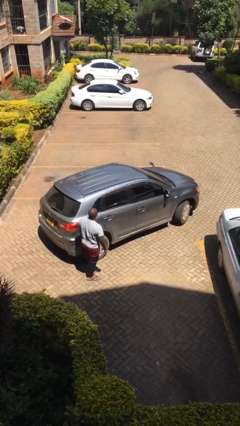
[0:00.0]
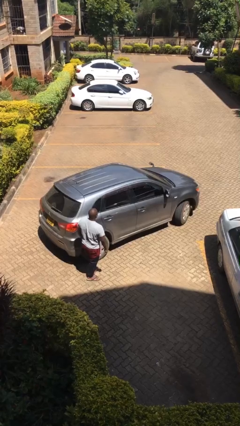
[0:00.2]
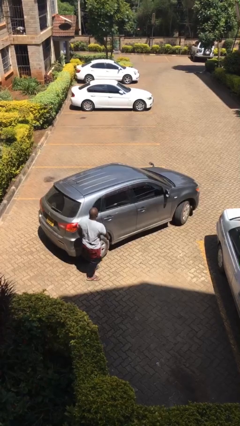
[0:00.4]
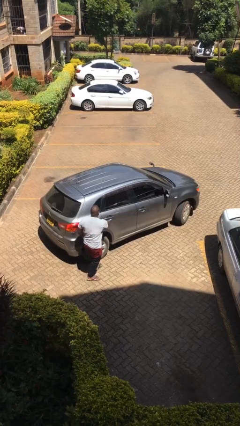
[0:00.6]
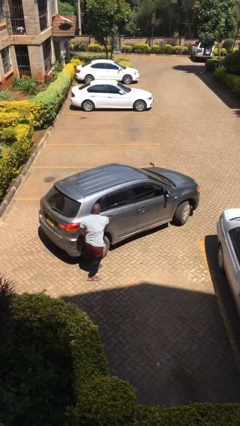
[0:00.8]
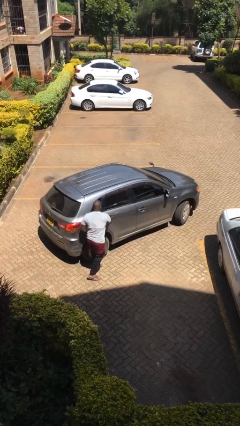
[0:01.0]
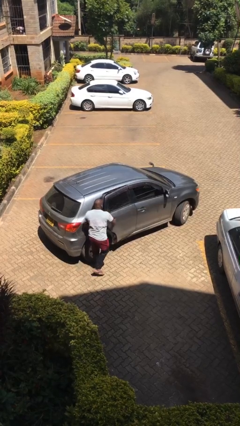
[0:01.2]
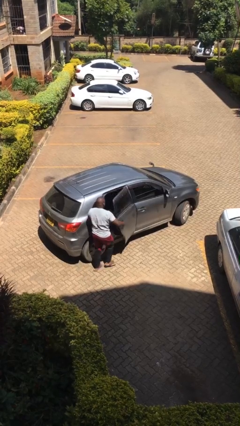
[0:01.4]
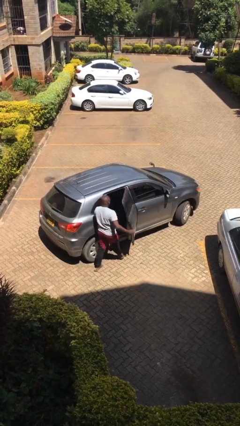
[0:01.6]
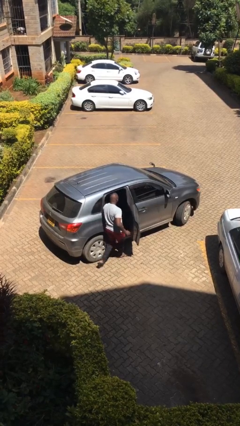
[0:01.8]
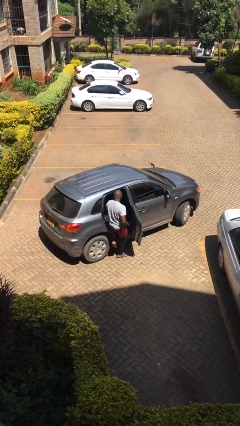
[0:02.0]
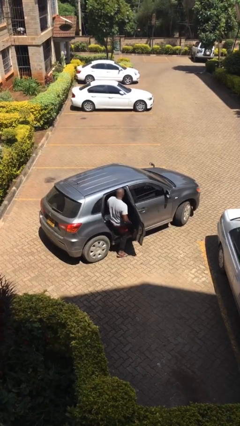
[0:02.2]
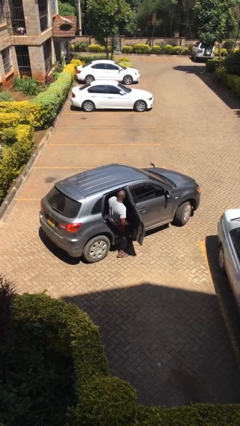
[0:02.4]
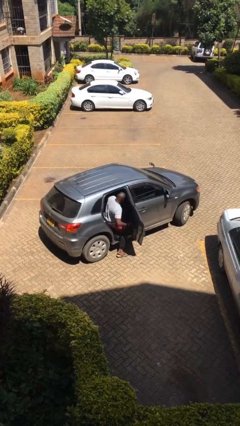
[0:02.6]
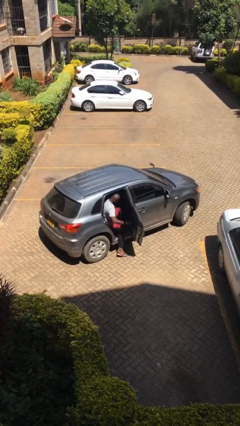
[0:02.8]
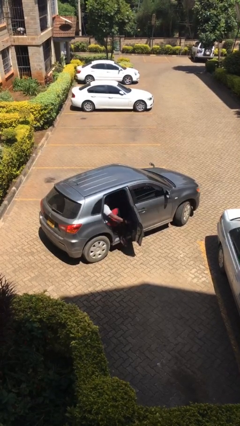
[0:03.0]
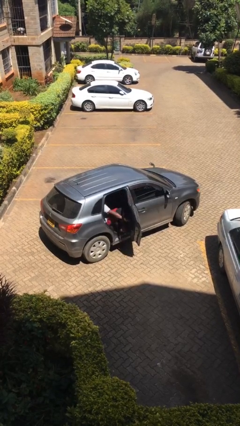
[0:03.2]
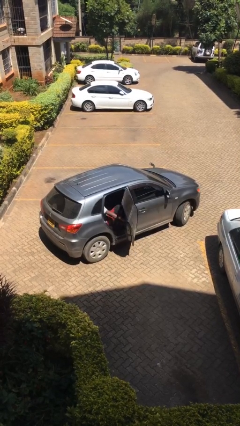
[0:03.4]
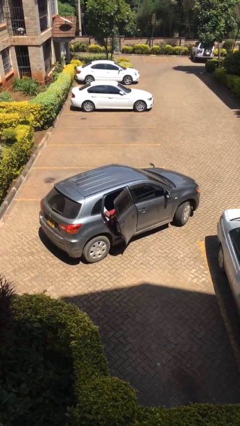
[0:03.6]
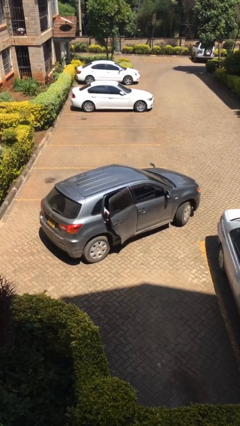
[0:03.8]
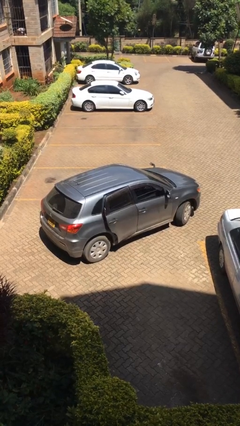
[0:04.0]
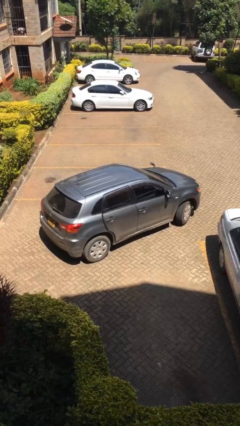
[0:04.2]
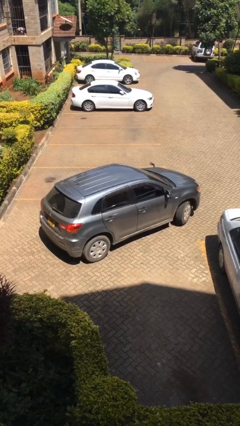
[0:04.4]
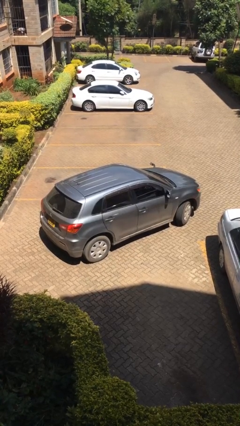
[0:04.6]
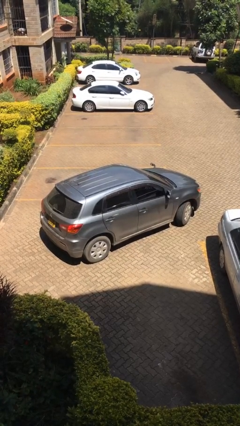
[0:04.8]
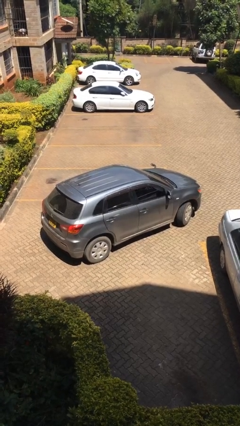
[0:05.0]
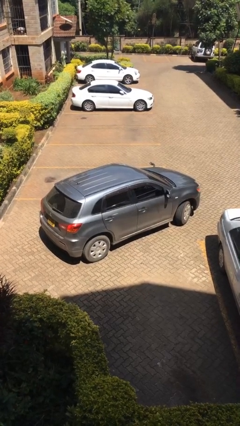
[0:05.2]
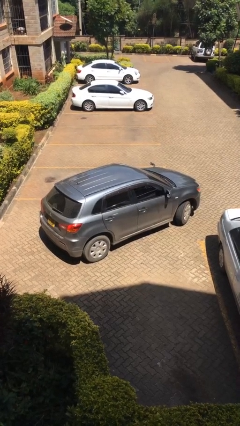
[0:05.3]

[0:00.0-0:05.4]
car picks up person

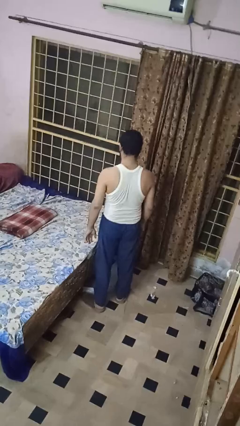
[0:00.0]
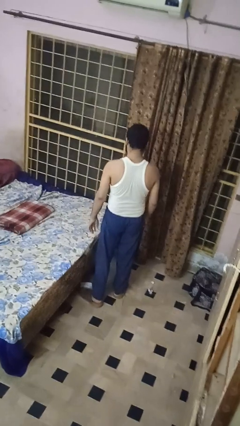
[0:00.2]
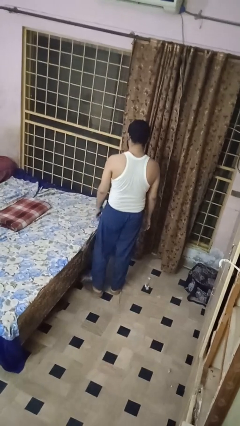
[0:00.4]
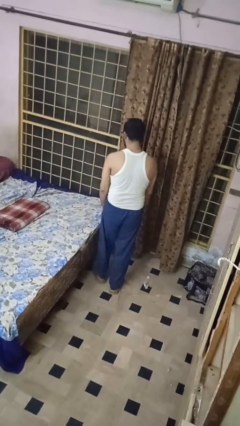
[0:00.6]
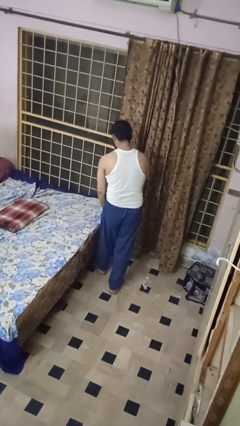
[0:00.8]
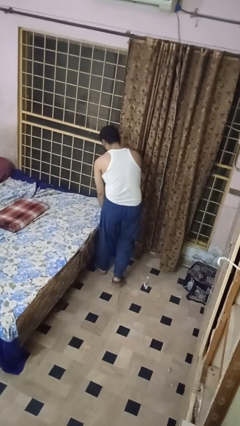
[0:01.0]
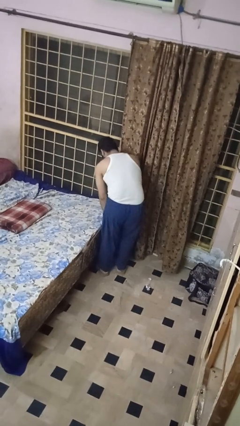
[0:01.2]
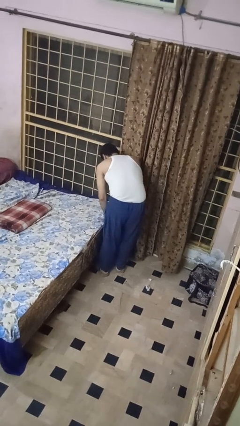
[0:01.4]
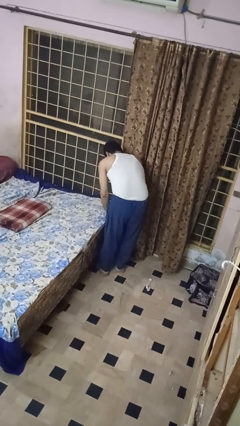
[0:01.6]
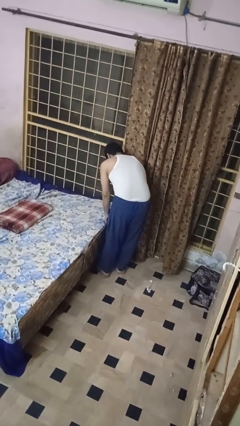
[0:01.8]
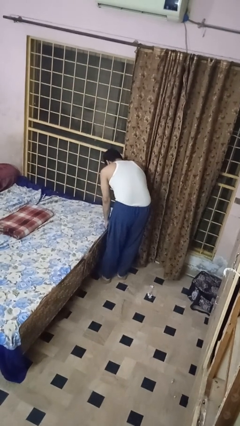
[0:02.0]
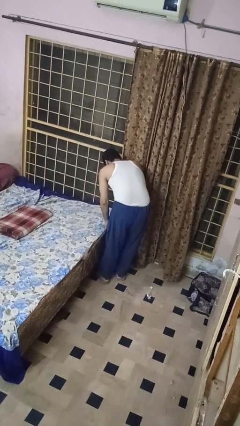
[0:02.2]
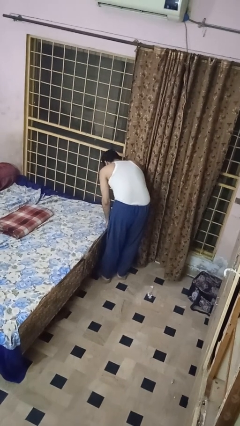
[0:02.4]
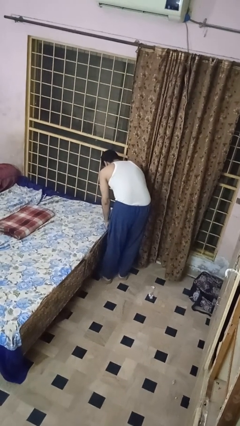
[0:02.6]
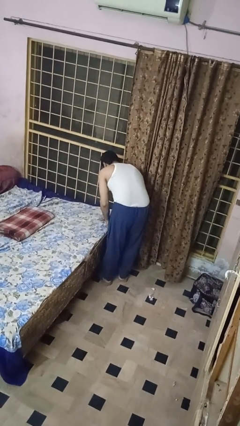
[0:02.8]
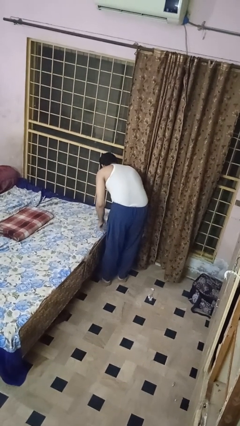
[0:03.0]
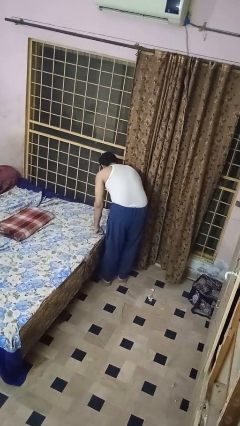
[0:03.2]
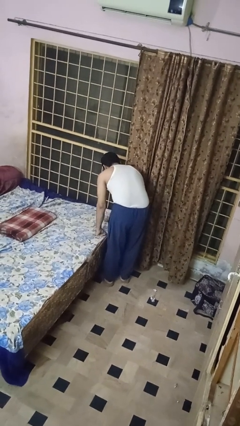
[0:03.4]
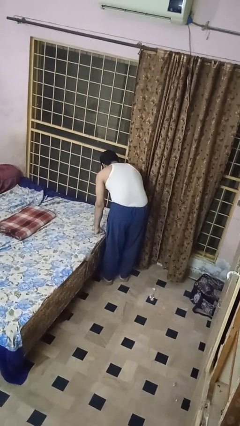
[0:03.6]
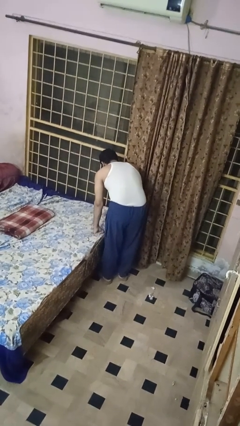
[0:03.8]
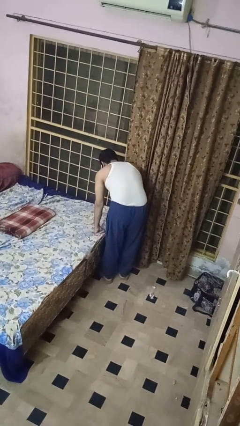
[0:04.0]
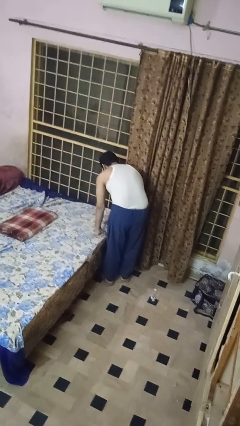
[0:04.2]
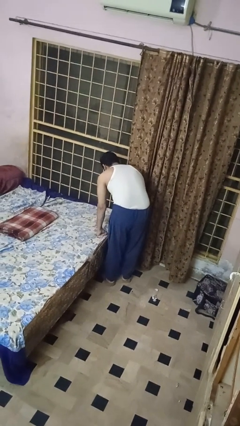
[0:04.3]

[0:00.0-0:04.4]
person makes bed

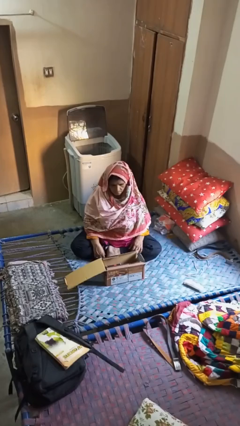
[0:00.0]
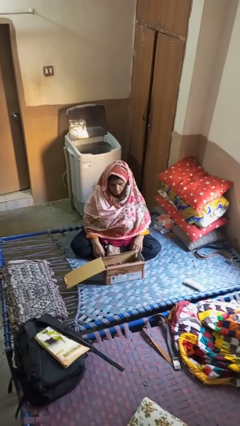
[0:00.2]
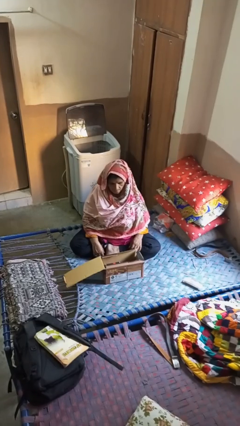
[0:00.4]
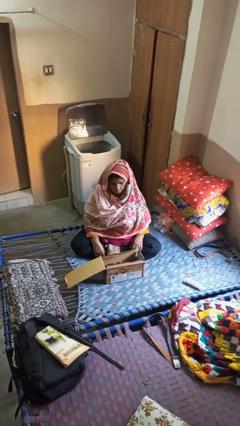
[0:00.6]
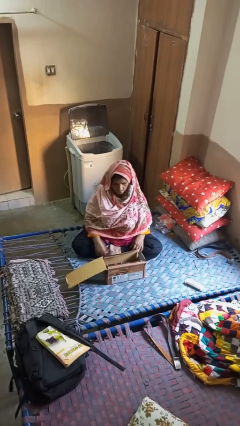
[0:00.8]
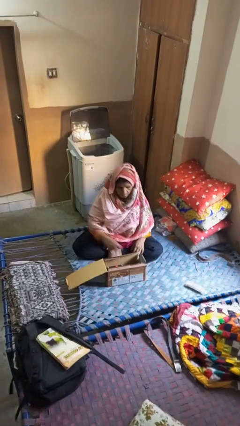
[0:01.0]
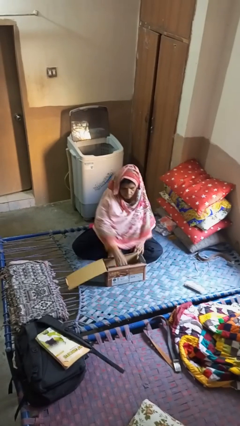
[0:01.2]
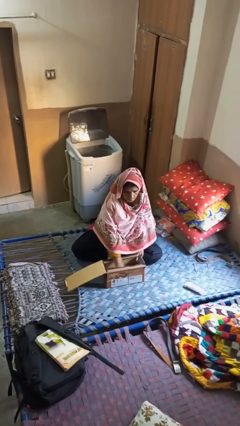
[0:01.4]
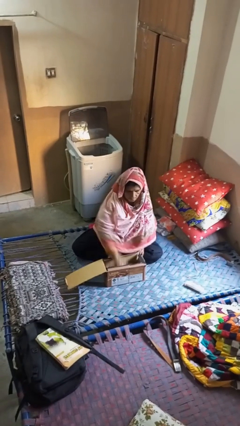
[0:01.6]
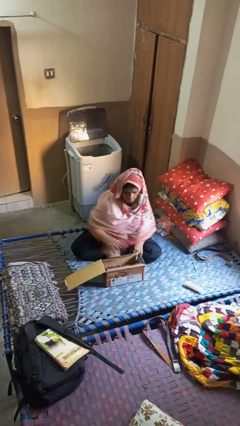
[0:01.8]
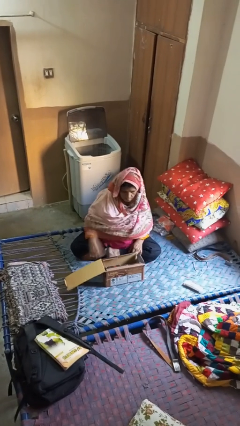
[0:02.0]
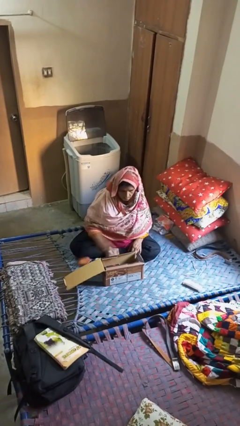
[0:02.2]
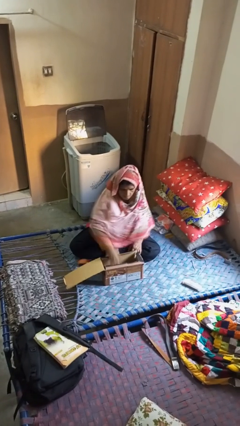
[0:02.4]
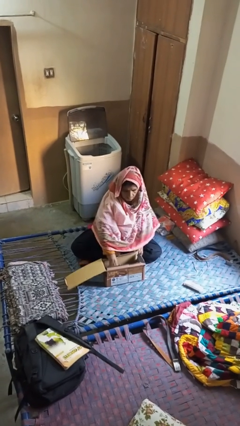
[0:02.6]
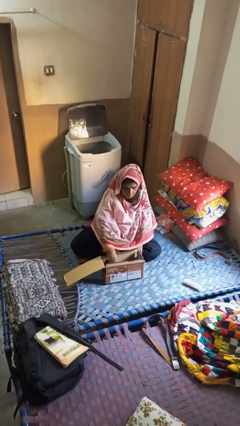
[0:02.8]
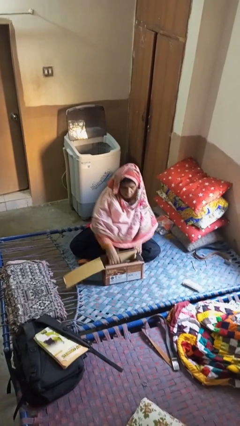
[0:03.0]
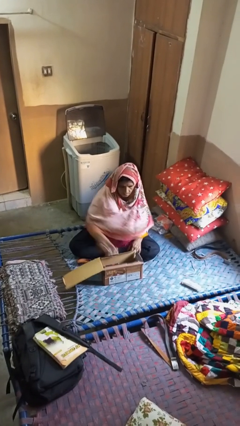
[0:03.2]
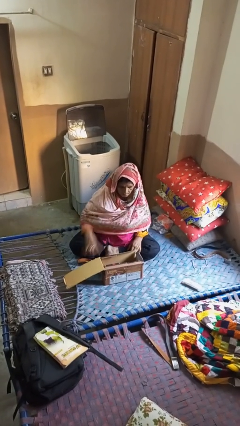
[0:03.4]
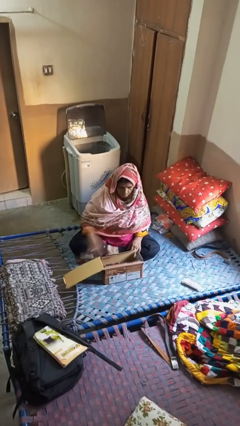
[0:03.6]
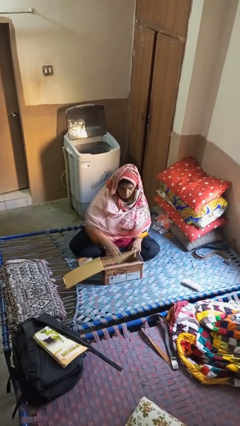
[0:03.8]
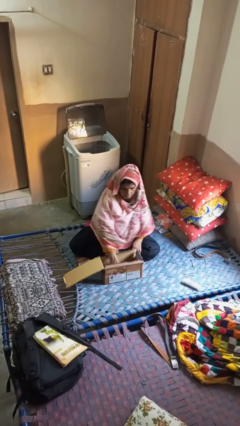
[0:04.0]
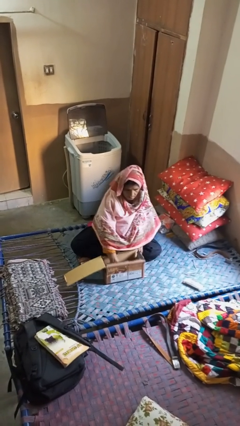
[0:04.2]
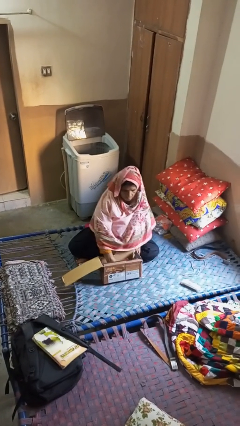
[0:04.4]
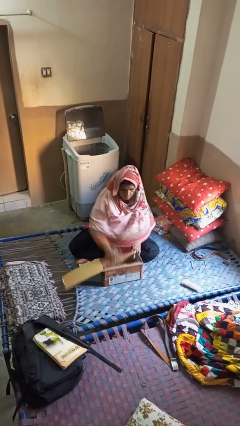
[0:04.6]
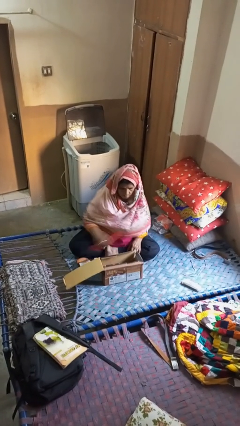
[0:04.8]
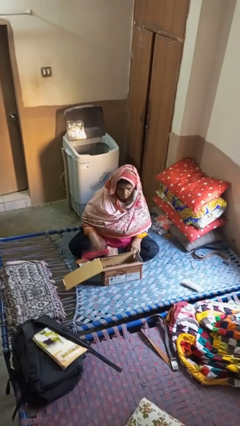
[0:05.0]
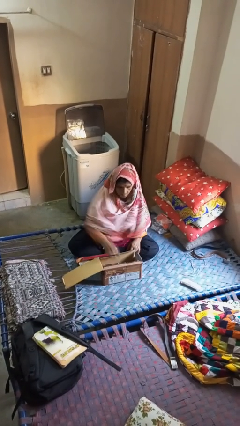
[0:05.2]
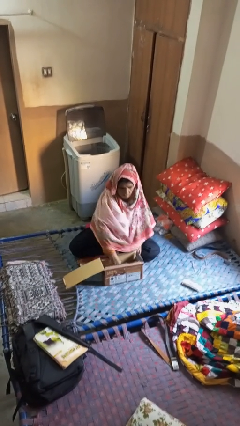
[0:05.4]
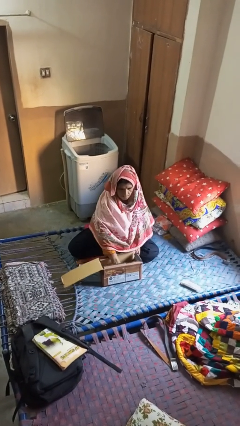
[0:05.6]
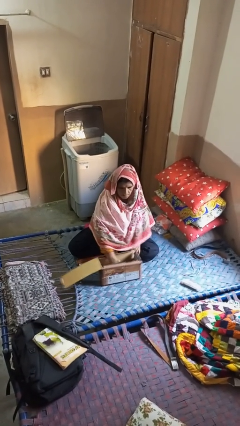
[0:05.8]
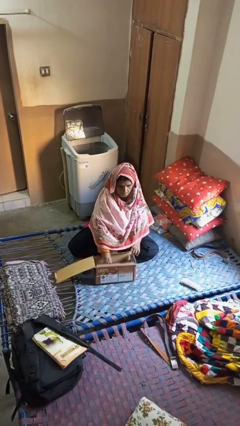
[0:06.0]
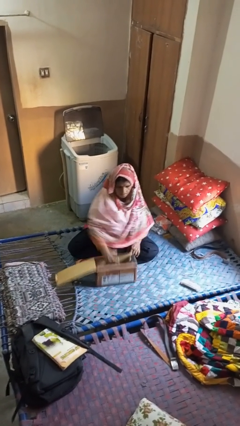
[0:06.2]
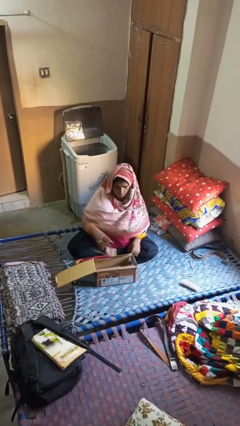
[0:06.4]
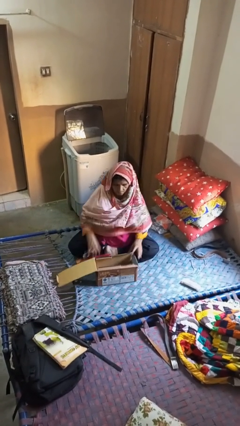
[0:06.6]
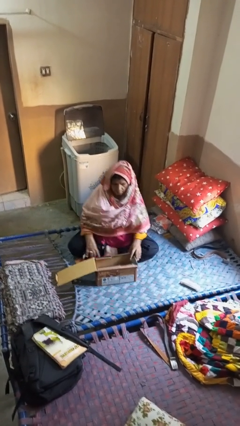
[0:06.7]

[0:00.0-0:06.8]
person takes object from box

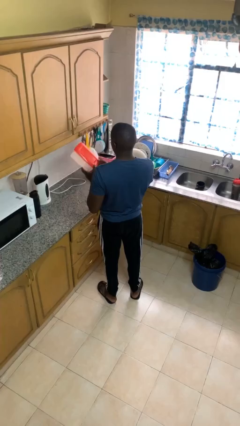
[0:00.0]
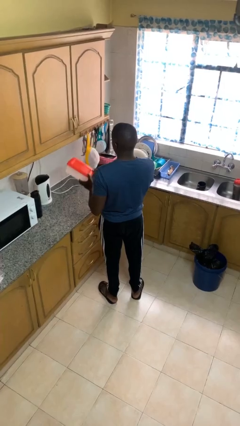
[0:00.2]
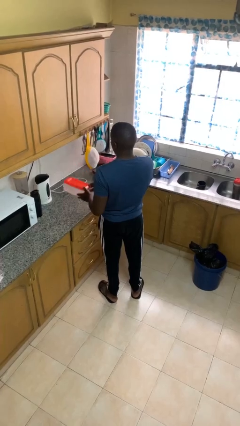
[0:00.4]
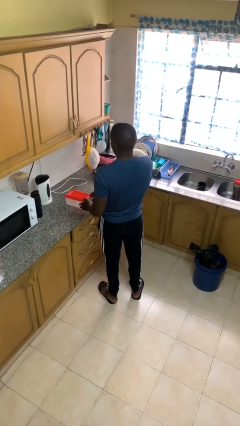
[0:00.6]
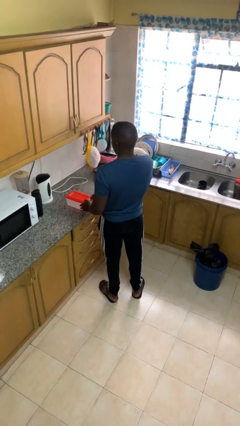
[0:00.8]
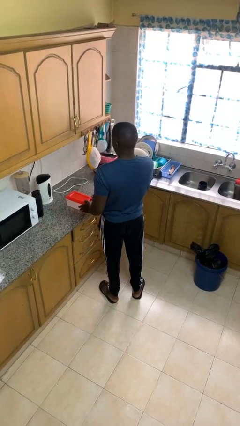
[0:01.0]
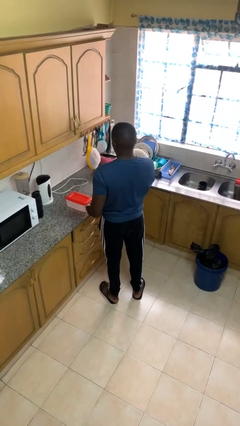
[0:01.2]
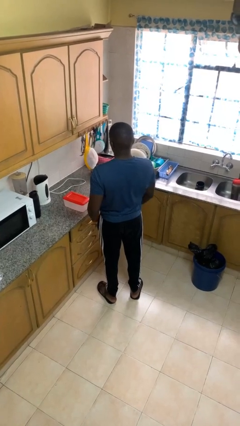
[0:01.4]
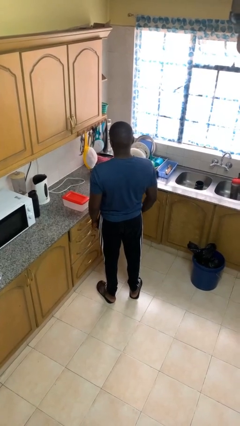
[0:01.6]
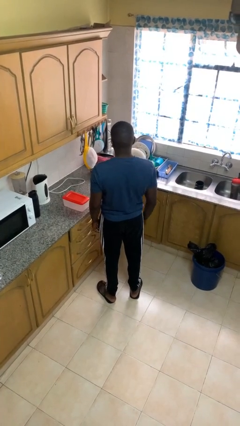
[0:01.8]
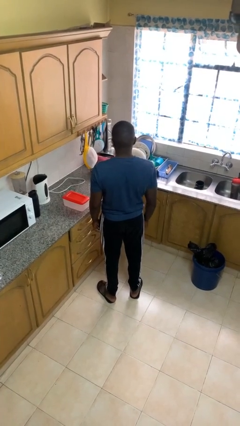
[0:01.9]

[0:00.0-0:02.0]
person puts down object on countertop
